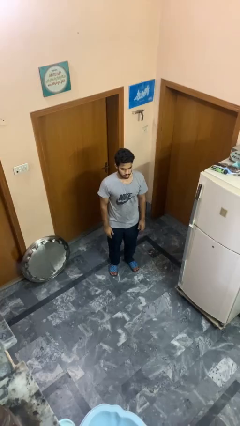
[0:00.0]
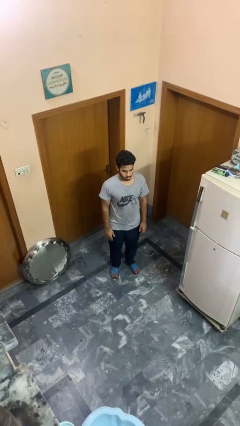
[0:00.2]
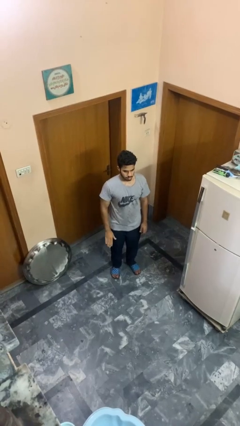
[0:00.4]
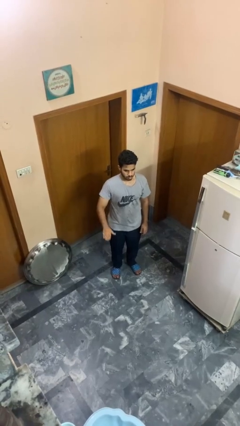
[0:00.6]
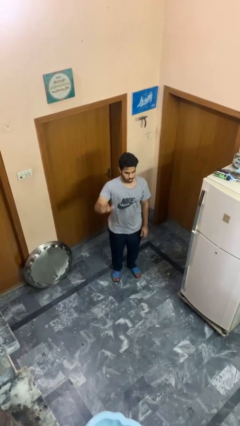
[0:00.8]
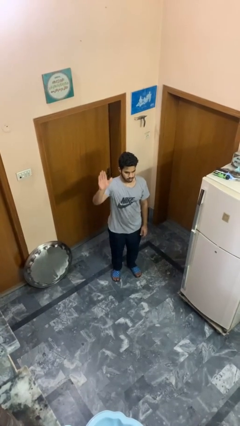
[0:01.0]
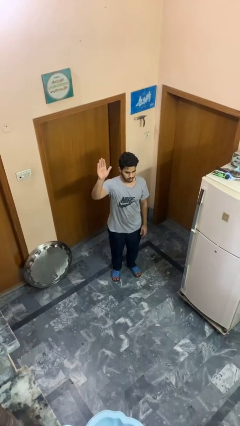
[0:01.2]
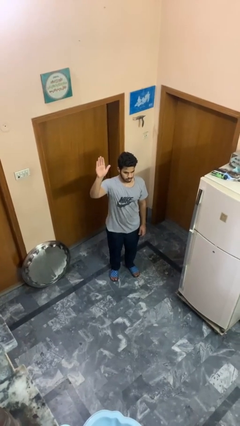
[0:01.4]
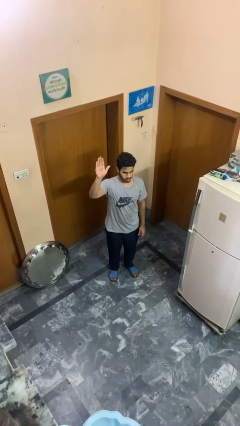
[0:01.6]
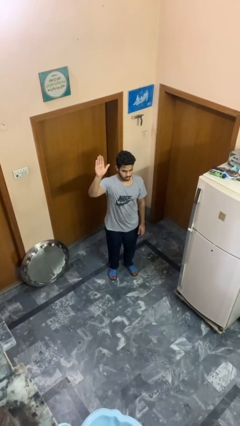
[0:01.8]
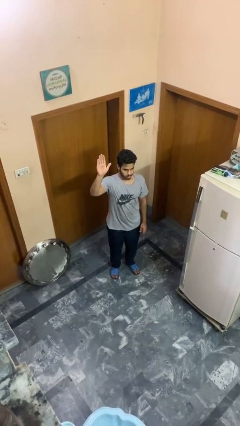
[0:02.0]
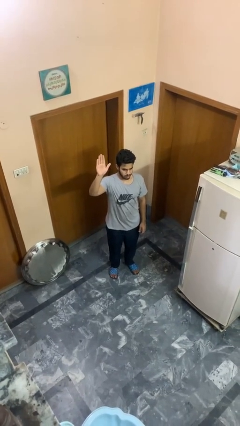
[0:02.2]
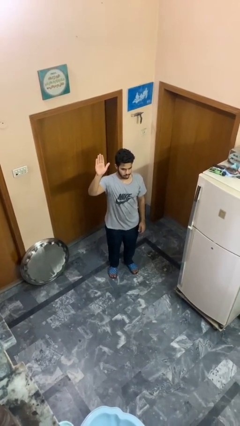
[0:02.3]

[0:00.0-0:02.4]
person gestures raise hand

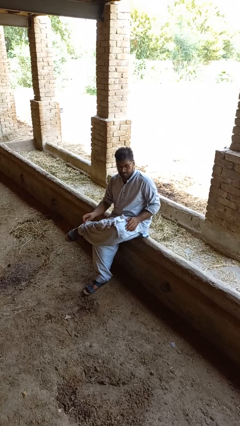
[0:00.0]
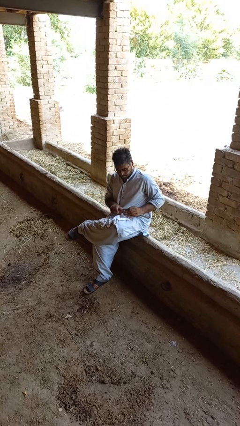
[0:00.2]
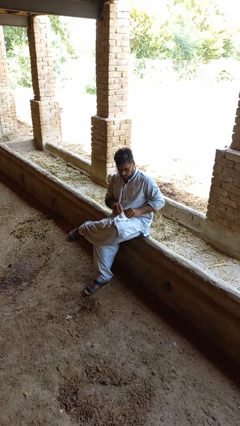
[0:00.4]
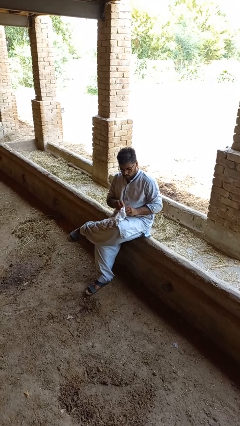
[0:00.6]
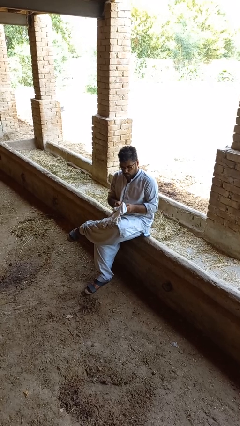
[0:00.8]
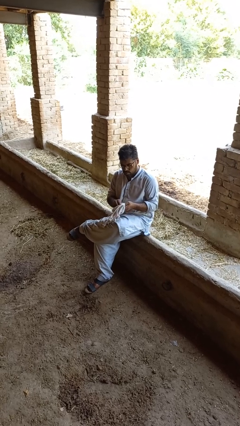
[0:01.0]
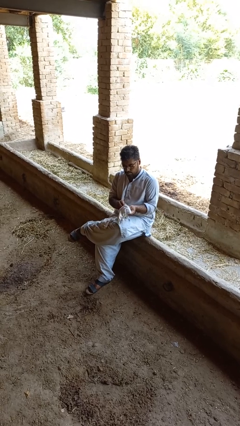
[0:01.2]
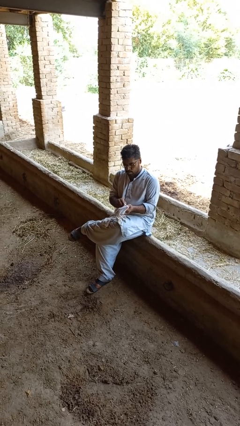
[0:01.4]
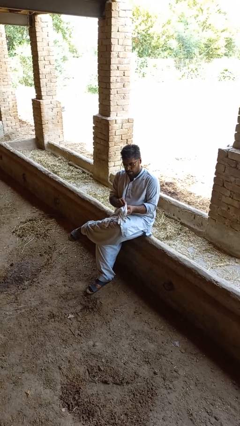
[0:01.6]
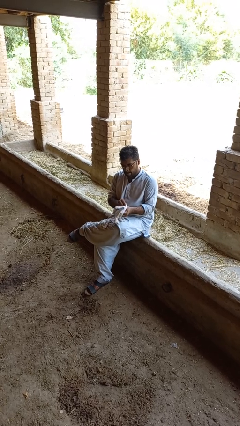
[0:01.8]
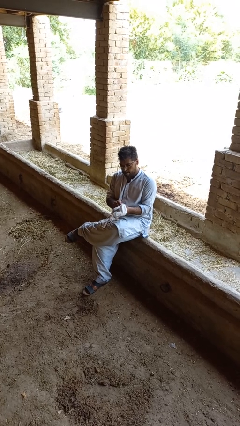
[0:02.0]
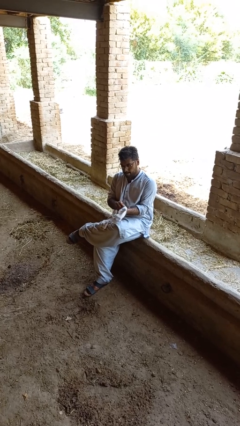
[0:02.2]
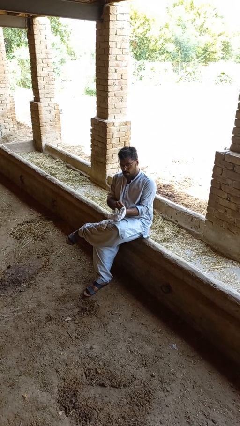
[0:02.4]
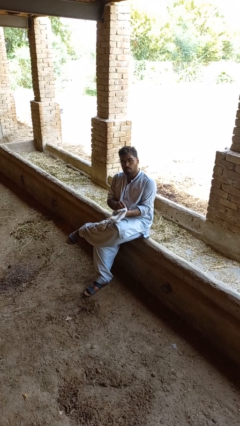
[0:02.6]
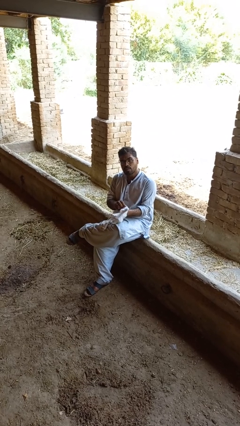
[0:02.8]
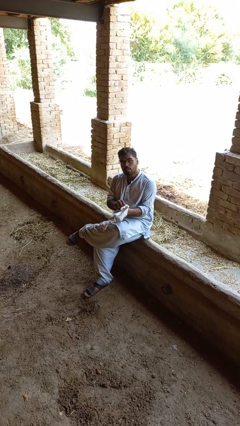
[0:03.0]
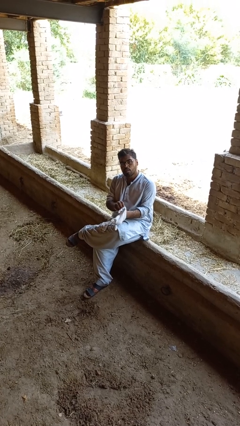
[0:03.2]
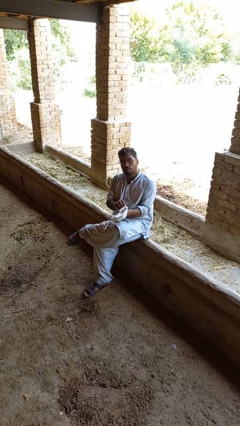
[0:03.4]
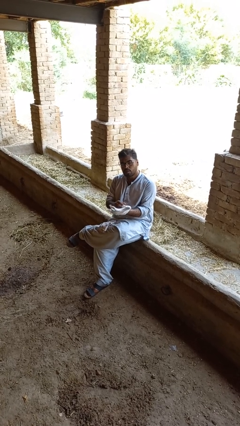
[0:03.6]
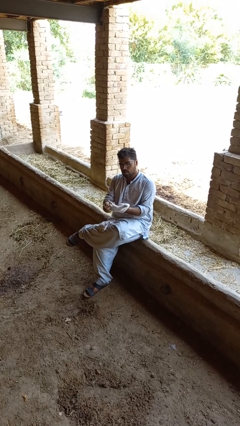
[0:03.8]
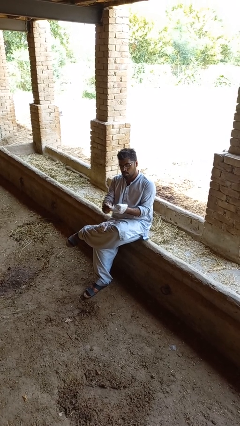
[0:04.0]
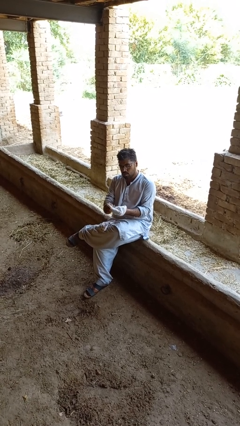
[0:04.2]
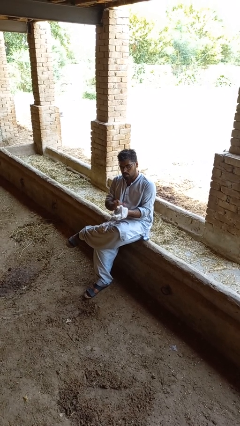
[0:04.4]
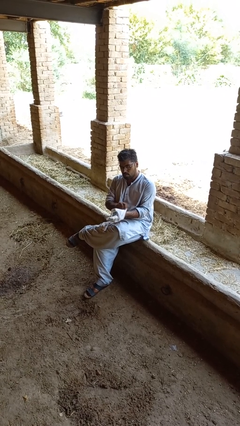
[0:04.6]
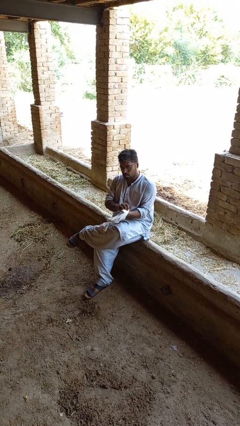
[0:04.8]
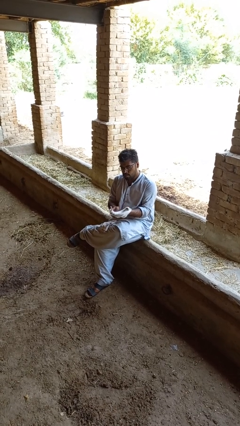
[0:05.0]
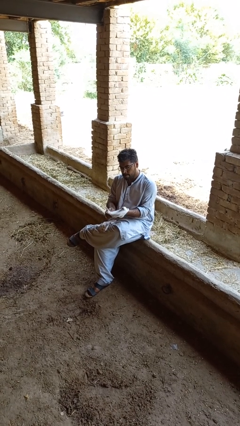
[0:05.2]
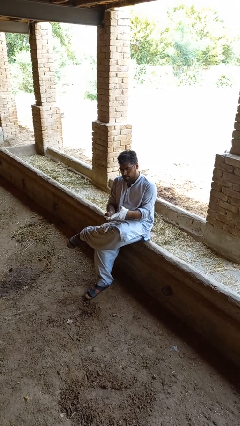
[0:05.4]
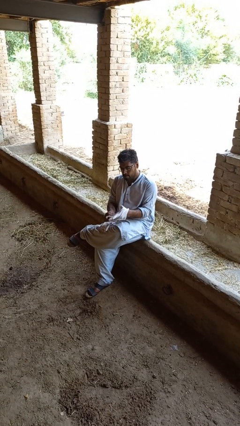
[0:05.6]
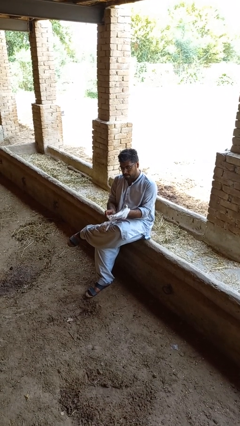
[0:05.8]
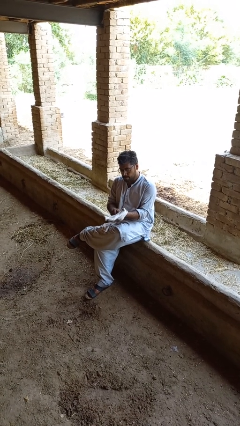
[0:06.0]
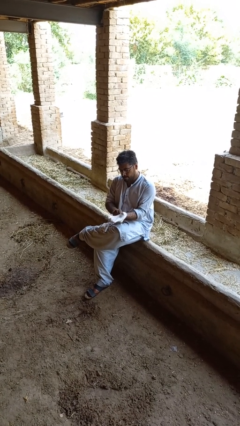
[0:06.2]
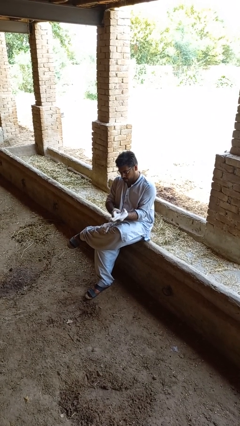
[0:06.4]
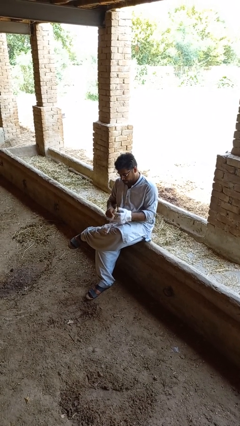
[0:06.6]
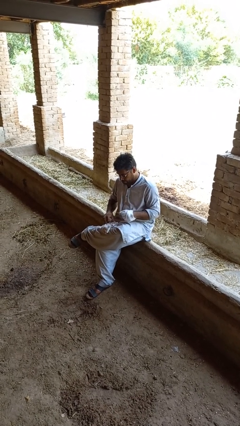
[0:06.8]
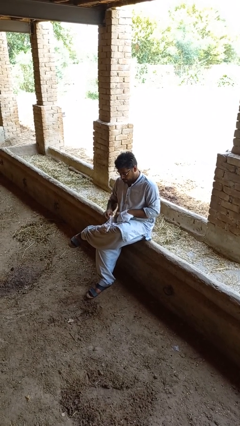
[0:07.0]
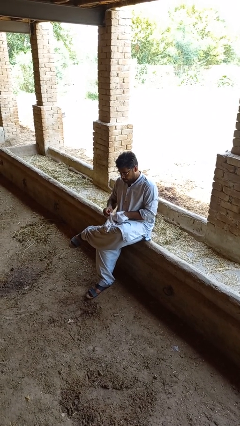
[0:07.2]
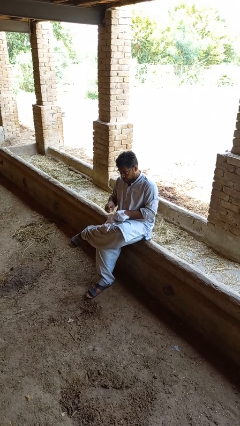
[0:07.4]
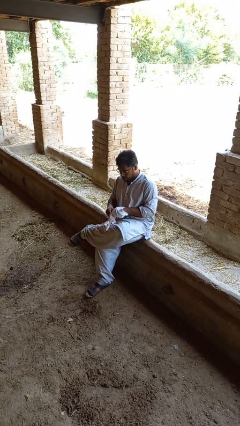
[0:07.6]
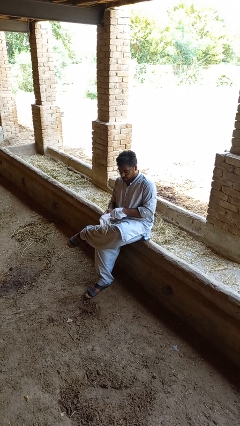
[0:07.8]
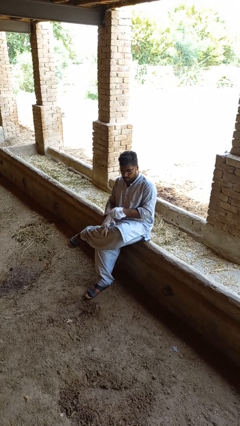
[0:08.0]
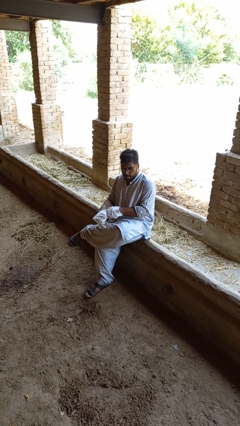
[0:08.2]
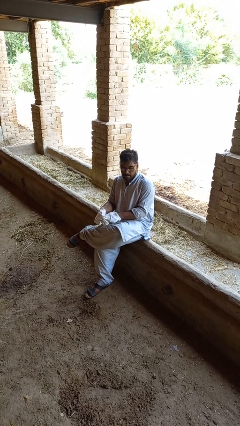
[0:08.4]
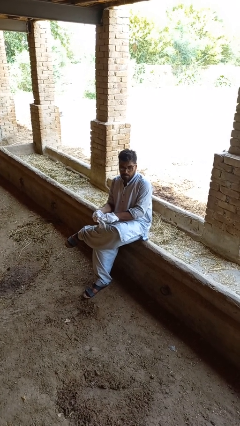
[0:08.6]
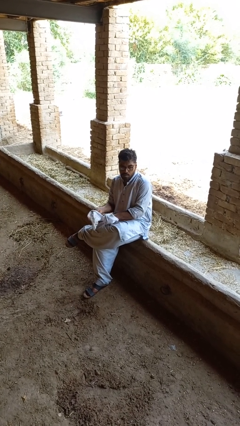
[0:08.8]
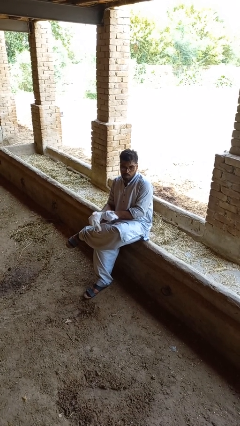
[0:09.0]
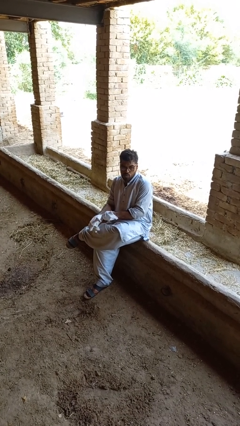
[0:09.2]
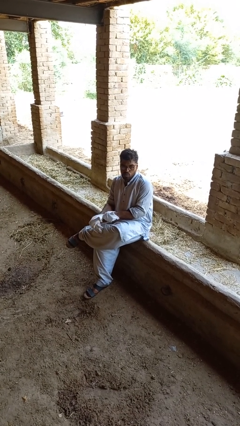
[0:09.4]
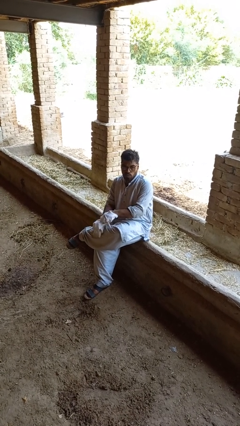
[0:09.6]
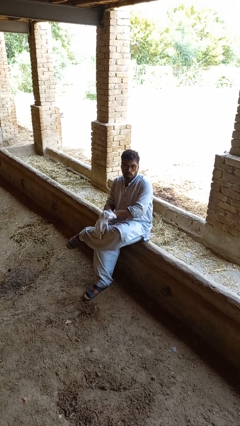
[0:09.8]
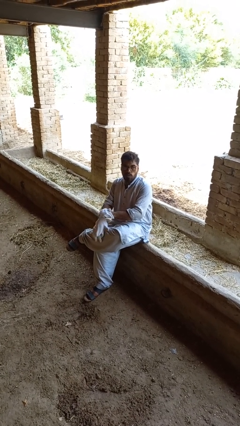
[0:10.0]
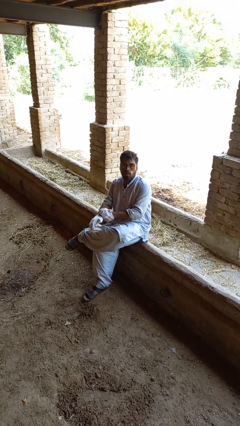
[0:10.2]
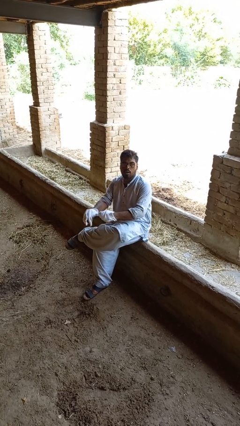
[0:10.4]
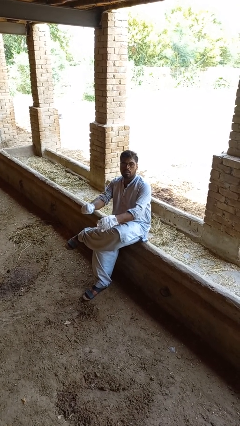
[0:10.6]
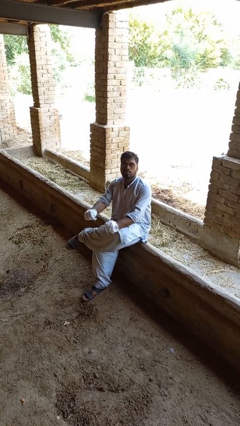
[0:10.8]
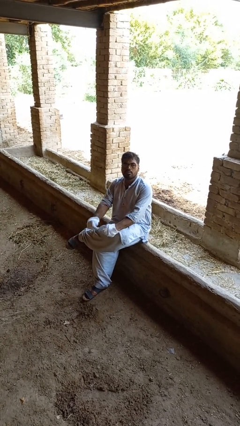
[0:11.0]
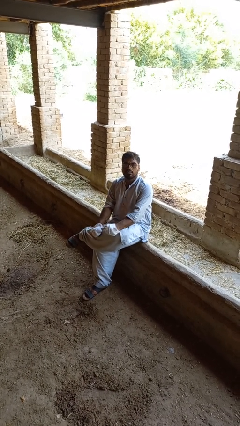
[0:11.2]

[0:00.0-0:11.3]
person puts on gloves

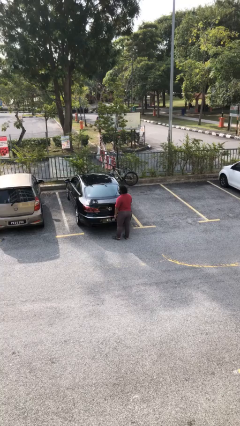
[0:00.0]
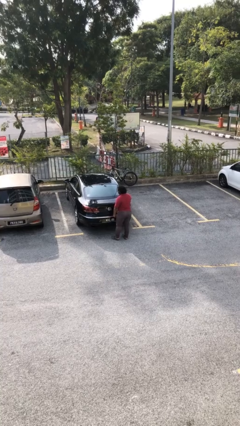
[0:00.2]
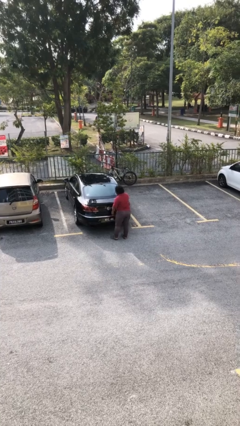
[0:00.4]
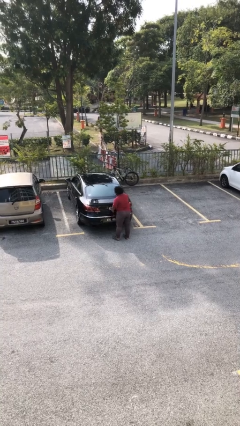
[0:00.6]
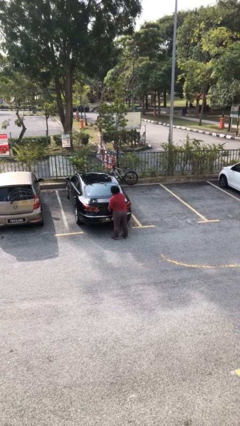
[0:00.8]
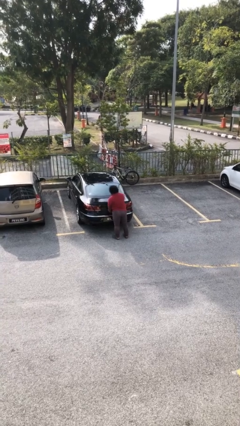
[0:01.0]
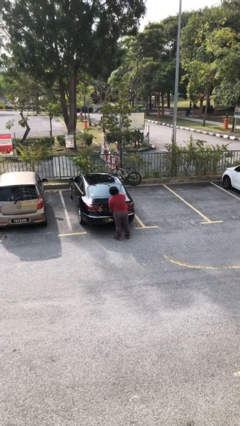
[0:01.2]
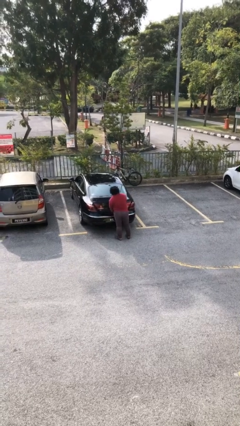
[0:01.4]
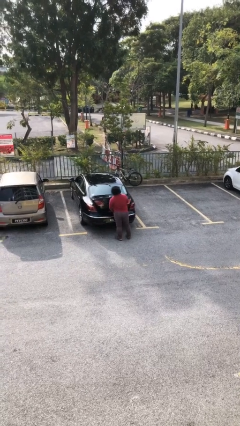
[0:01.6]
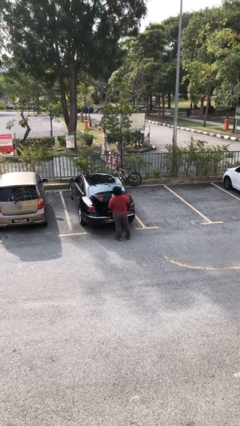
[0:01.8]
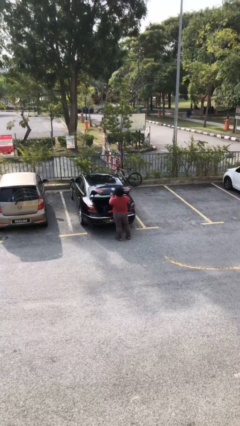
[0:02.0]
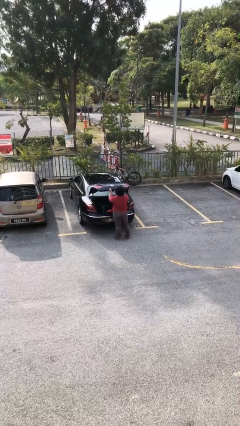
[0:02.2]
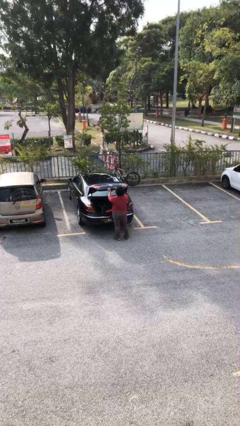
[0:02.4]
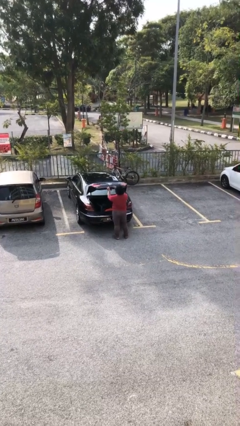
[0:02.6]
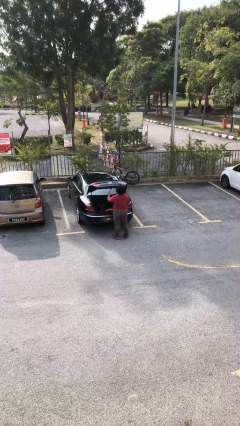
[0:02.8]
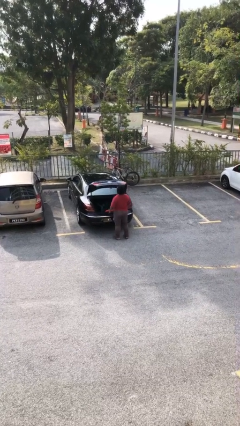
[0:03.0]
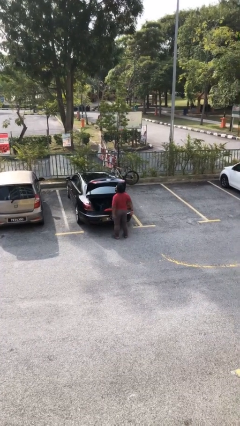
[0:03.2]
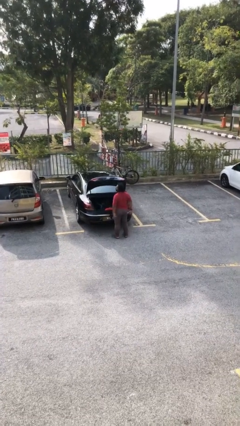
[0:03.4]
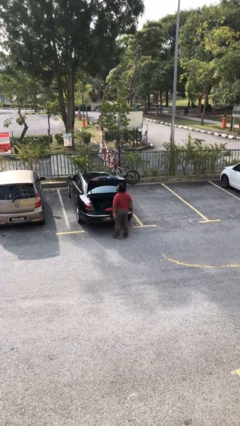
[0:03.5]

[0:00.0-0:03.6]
person opens car trunk

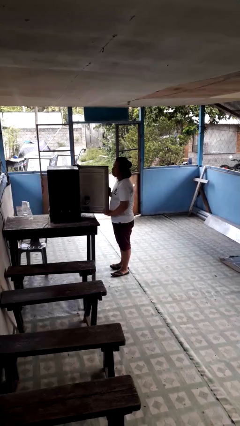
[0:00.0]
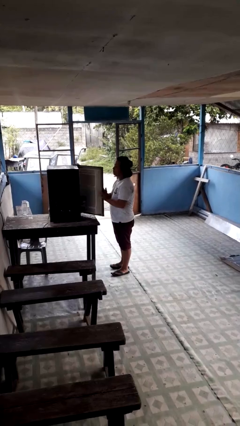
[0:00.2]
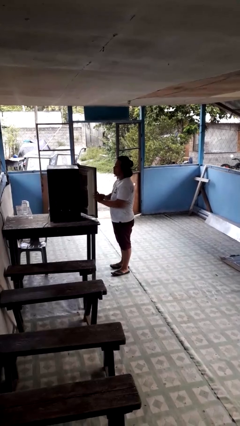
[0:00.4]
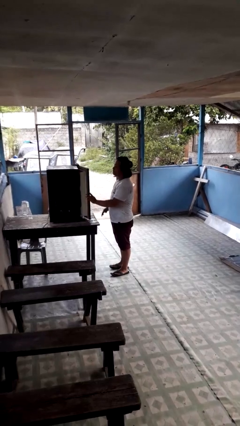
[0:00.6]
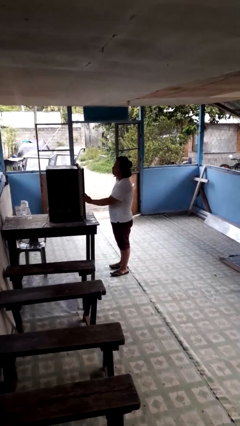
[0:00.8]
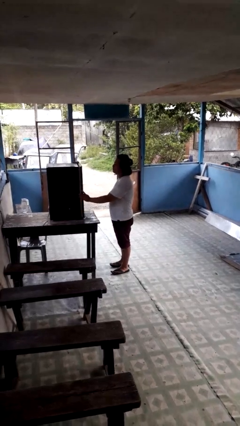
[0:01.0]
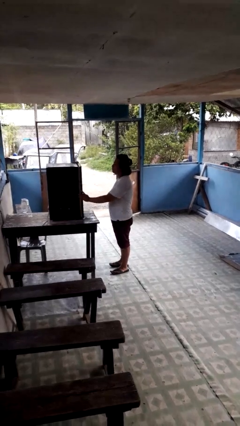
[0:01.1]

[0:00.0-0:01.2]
person closes refrigerator
